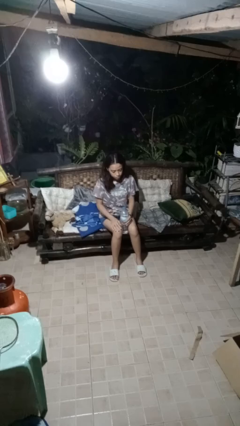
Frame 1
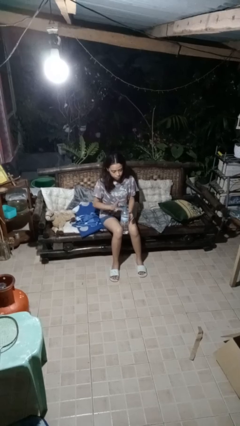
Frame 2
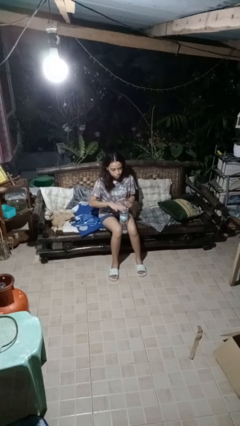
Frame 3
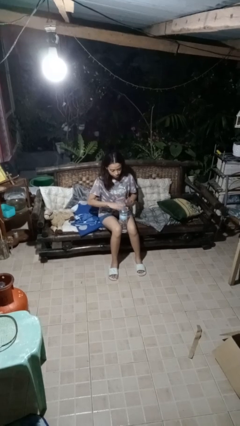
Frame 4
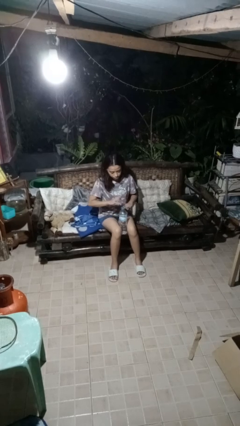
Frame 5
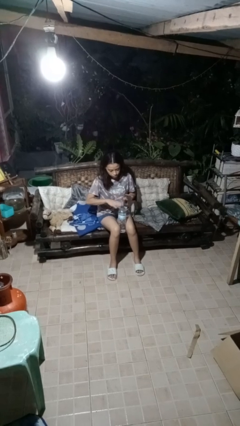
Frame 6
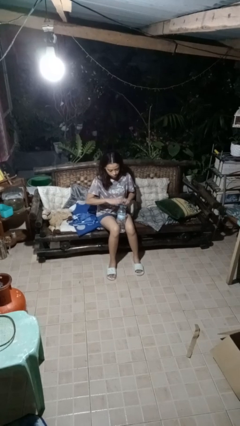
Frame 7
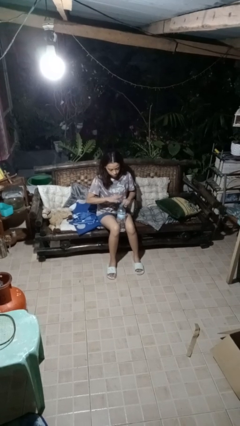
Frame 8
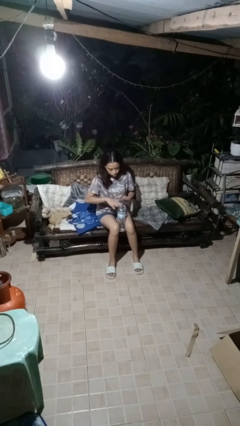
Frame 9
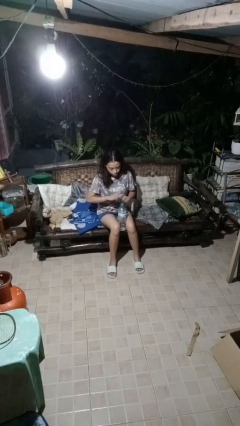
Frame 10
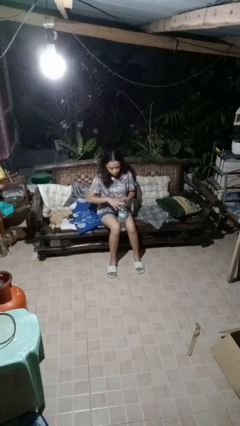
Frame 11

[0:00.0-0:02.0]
person taps object with finger

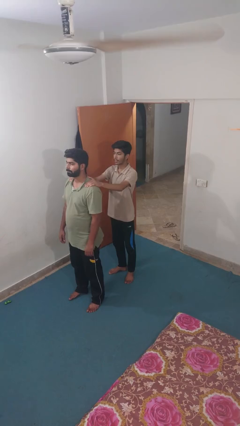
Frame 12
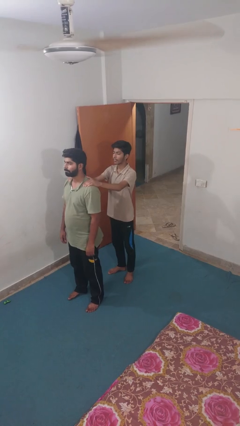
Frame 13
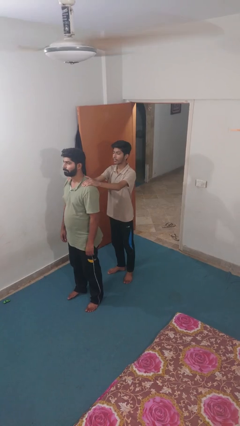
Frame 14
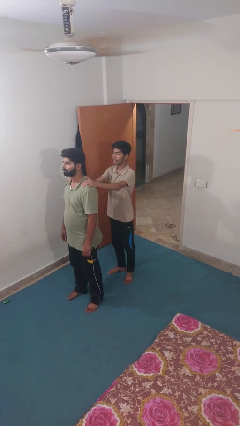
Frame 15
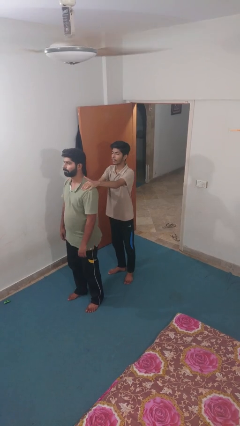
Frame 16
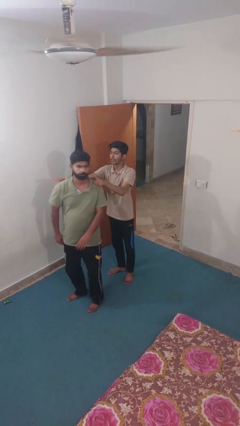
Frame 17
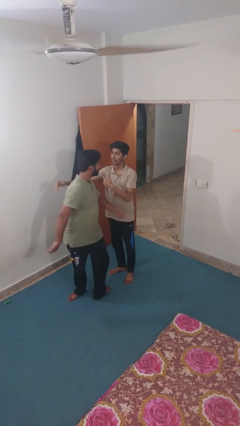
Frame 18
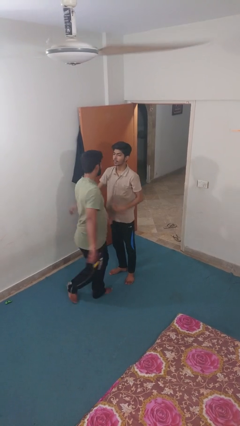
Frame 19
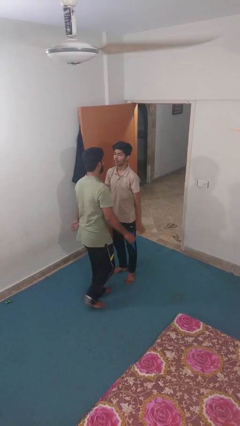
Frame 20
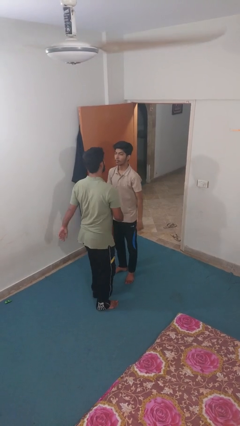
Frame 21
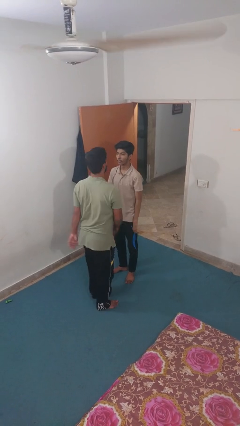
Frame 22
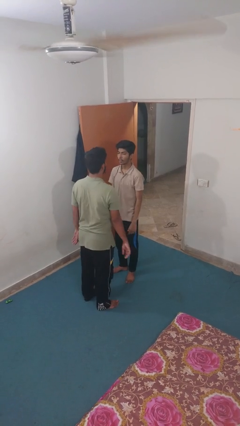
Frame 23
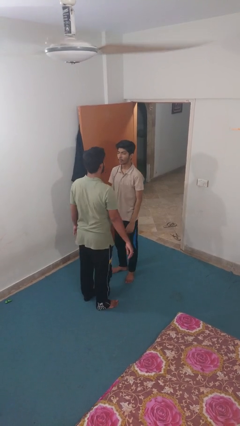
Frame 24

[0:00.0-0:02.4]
person spins person around

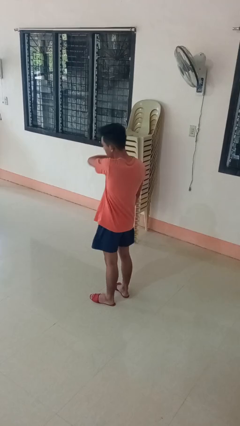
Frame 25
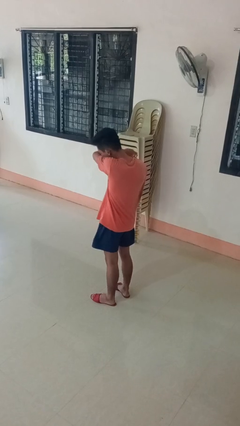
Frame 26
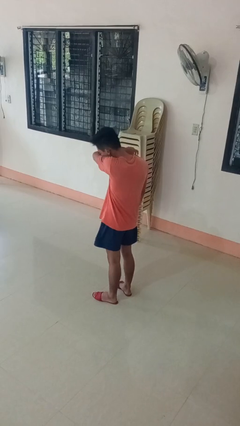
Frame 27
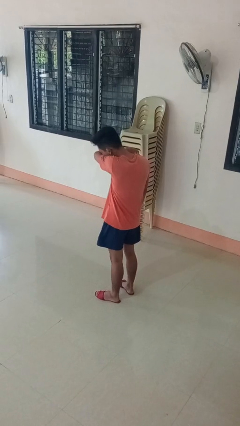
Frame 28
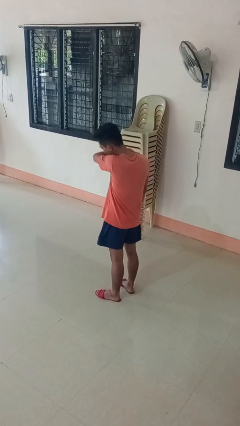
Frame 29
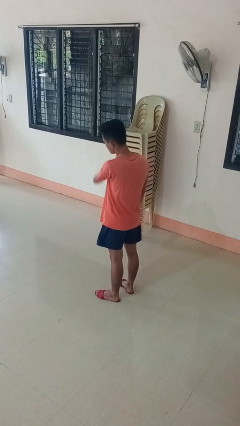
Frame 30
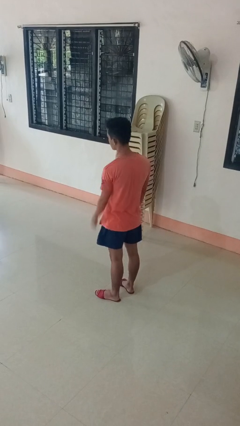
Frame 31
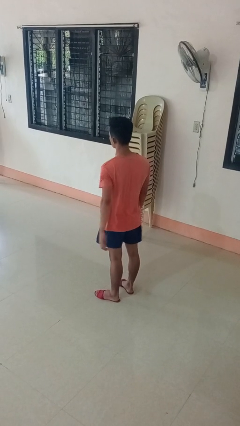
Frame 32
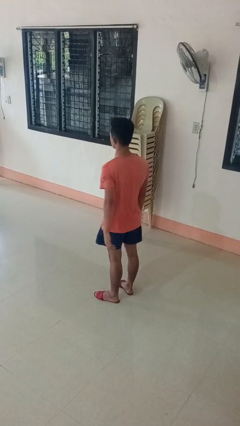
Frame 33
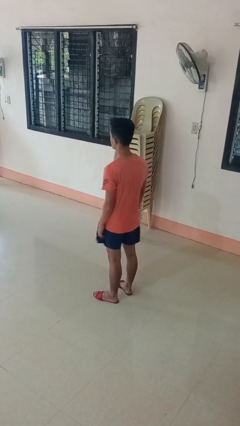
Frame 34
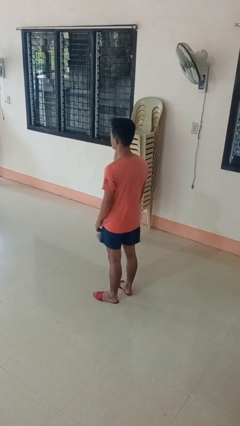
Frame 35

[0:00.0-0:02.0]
person sneezes into arm

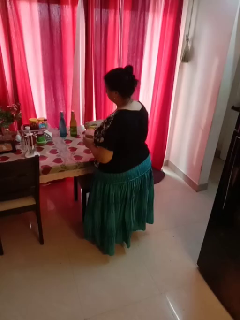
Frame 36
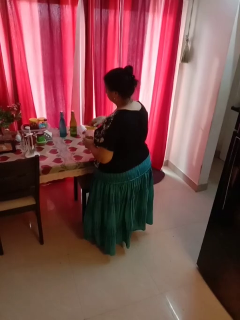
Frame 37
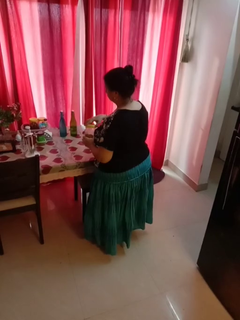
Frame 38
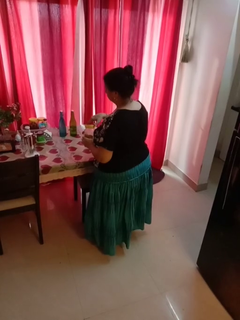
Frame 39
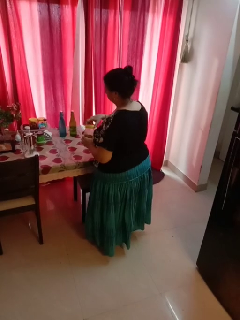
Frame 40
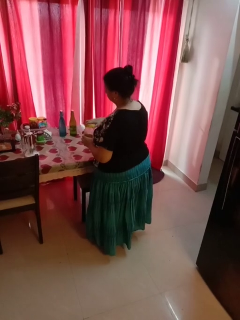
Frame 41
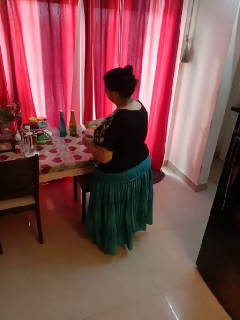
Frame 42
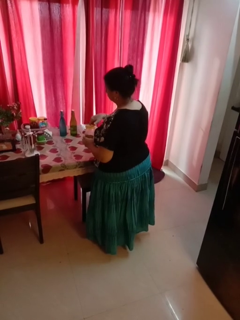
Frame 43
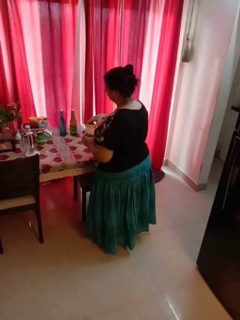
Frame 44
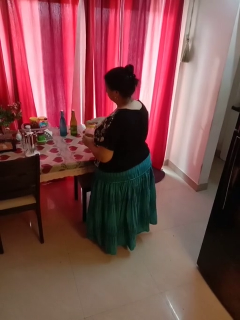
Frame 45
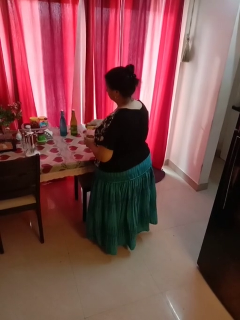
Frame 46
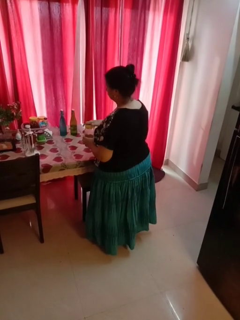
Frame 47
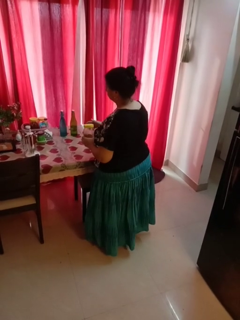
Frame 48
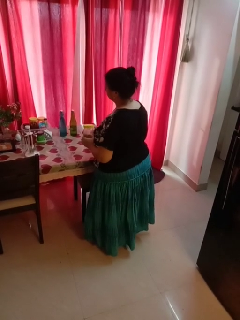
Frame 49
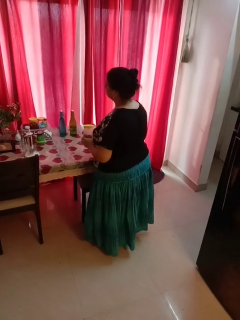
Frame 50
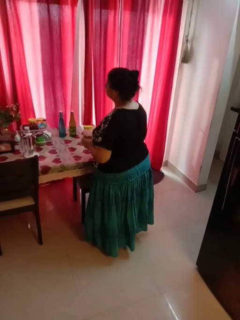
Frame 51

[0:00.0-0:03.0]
person closes jar

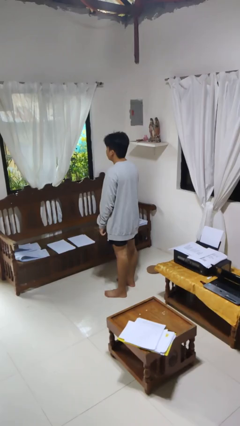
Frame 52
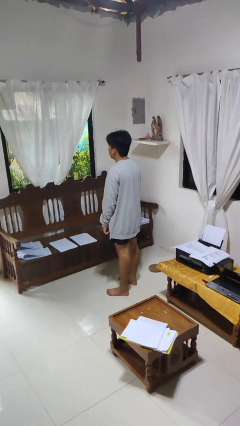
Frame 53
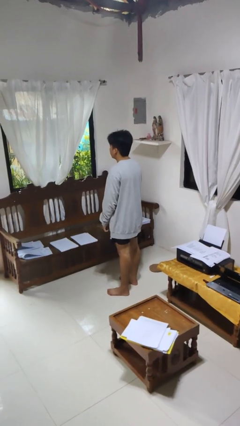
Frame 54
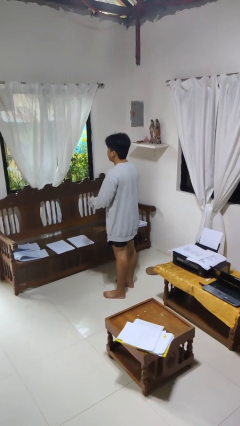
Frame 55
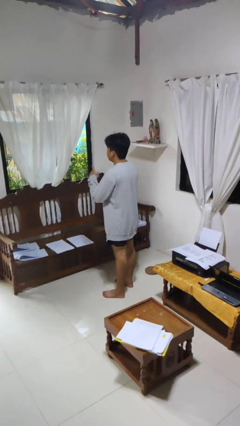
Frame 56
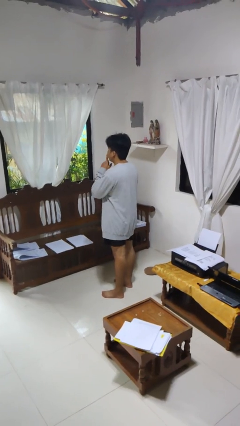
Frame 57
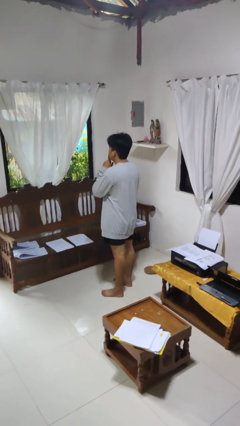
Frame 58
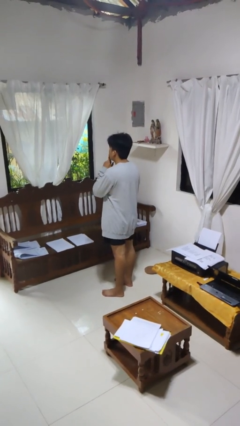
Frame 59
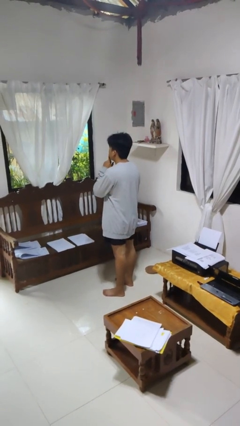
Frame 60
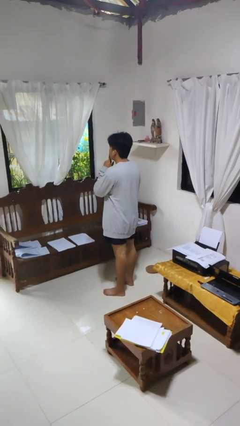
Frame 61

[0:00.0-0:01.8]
person gestures be quiet

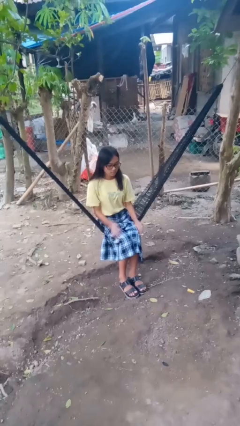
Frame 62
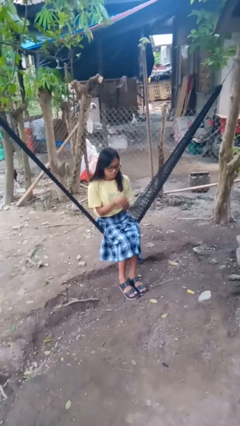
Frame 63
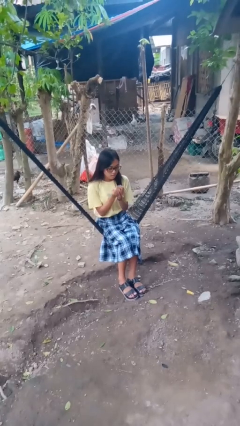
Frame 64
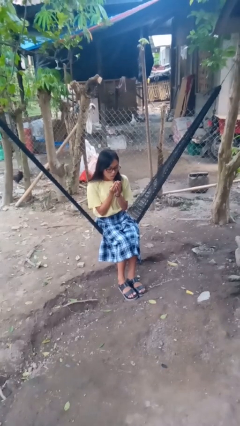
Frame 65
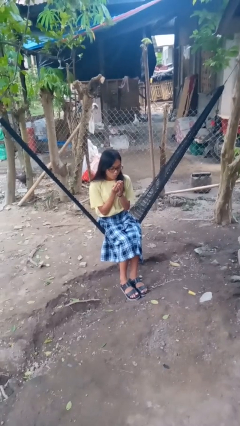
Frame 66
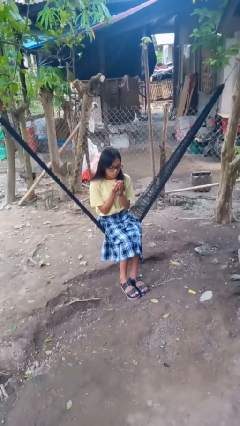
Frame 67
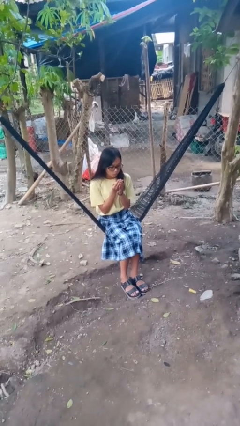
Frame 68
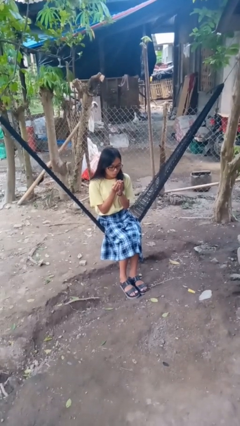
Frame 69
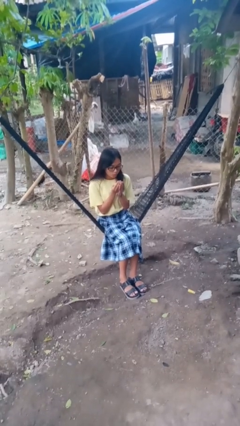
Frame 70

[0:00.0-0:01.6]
person blows into hands

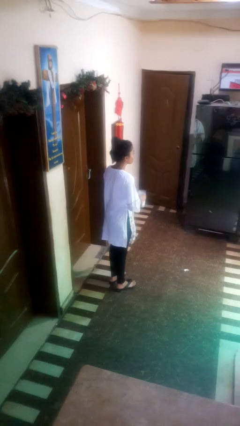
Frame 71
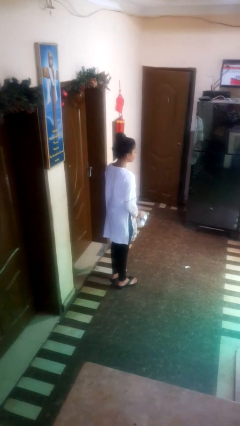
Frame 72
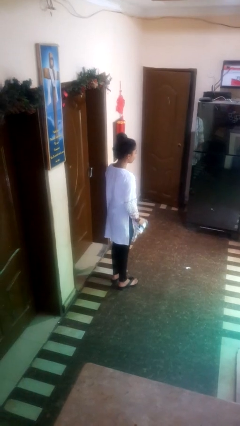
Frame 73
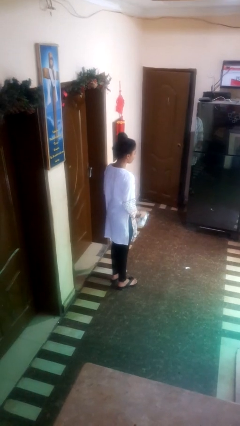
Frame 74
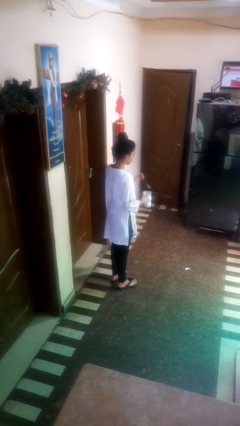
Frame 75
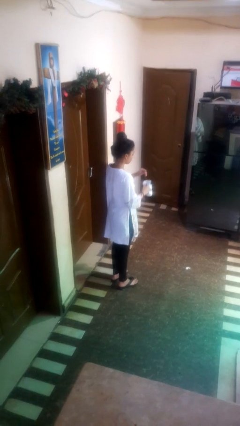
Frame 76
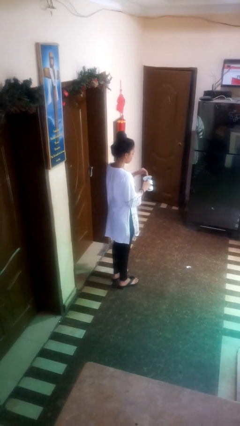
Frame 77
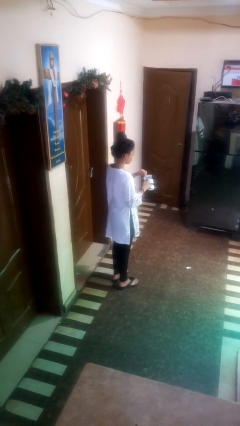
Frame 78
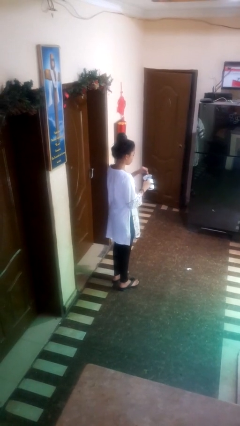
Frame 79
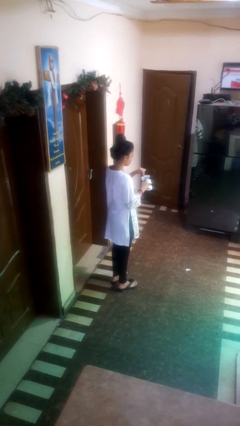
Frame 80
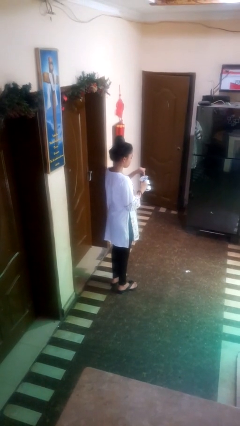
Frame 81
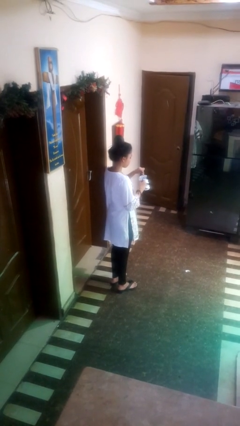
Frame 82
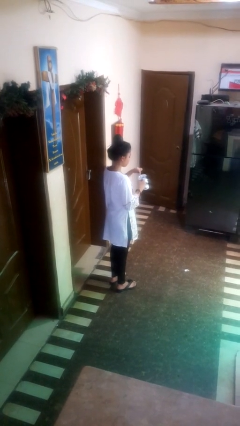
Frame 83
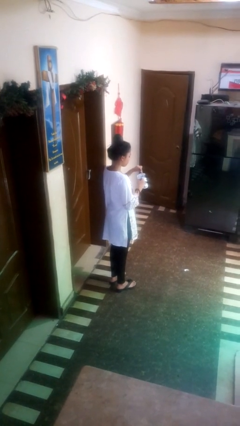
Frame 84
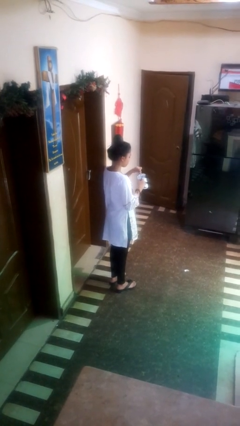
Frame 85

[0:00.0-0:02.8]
person stirs mug

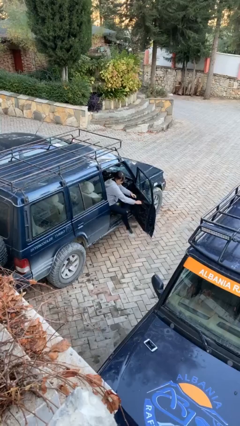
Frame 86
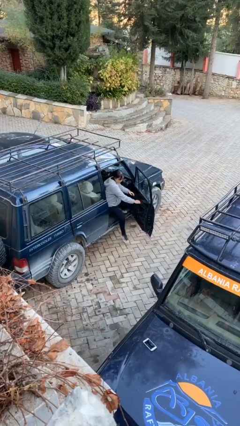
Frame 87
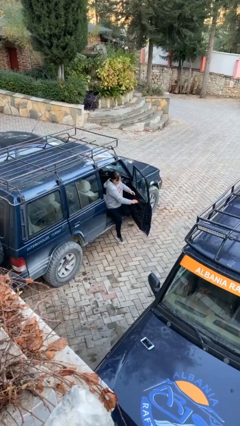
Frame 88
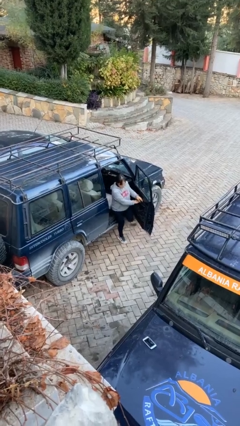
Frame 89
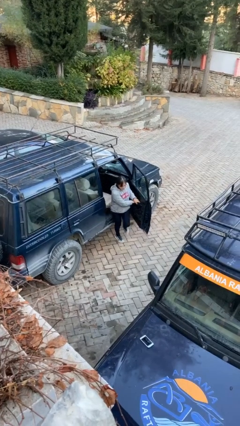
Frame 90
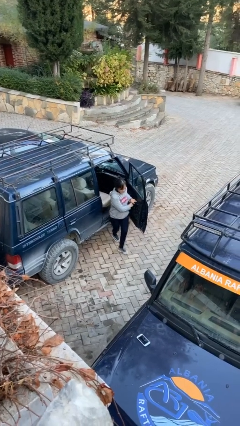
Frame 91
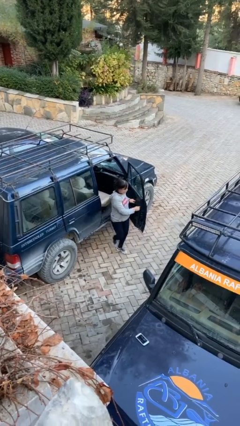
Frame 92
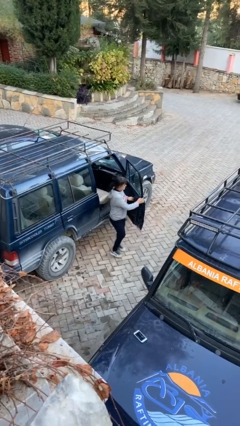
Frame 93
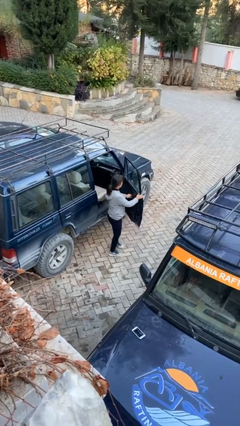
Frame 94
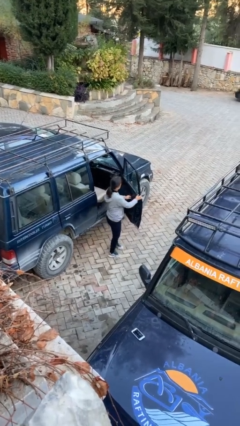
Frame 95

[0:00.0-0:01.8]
person exits car

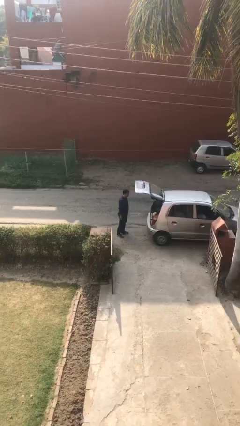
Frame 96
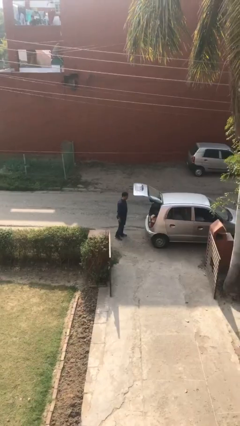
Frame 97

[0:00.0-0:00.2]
person unloads car
